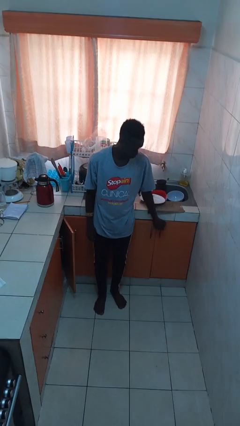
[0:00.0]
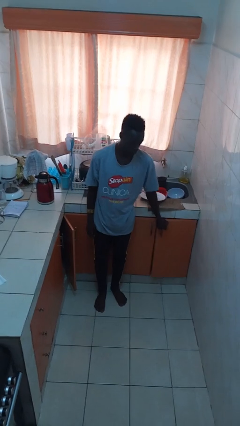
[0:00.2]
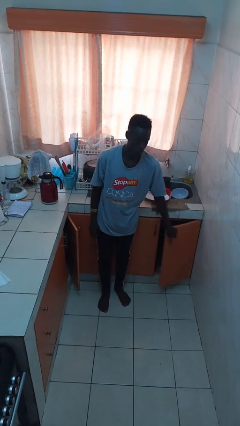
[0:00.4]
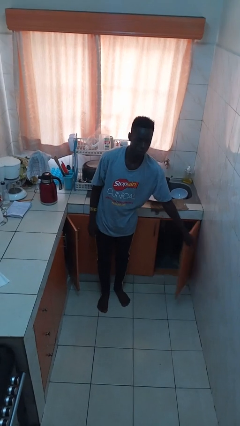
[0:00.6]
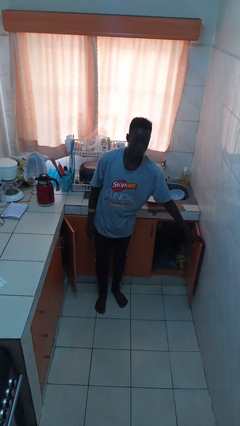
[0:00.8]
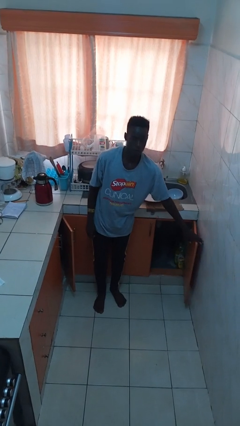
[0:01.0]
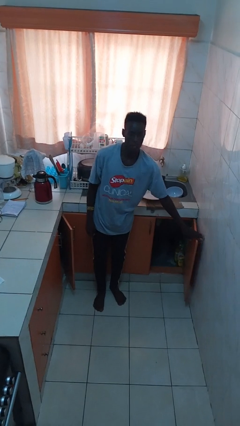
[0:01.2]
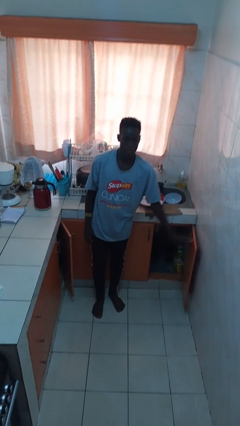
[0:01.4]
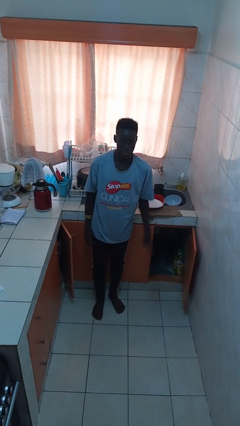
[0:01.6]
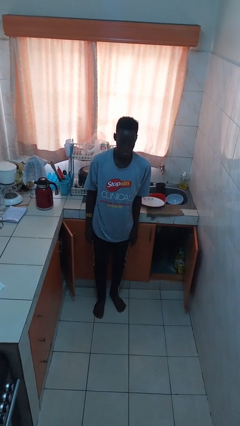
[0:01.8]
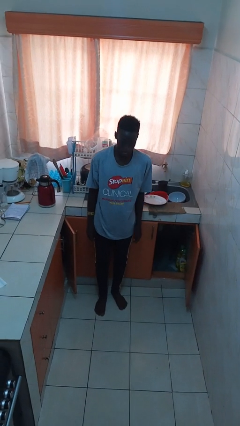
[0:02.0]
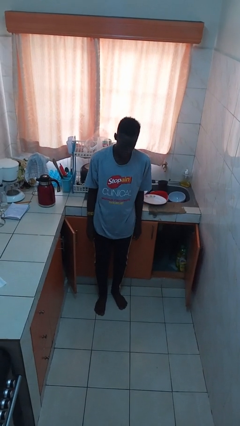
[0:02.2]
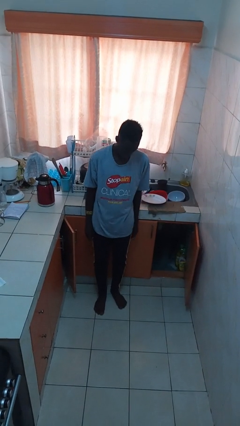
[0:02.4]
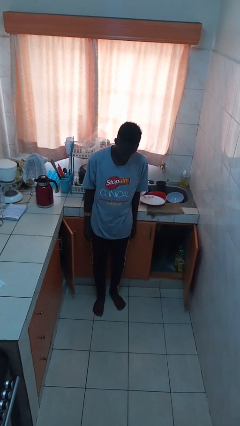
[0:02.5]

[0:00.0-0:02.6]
person opens cabinet

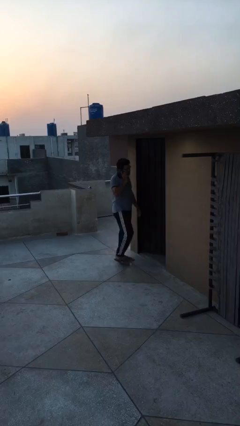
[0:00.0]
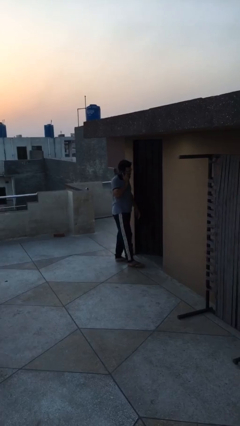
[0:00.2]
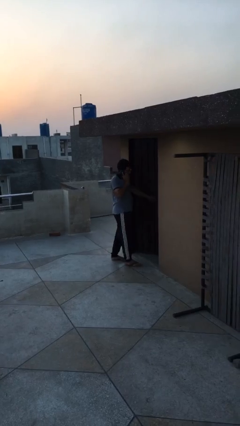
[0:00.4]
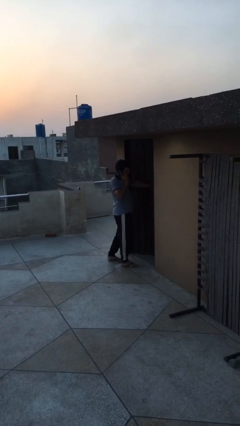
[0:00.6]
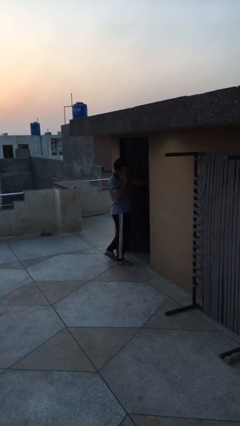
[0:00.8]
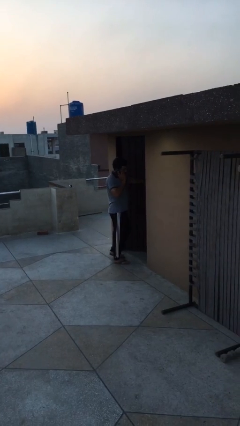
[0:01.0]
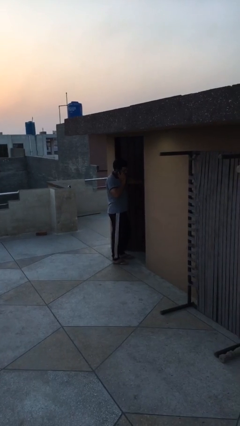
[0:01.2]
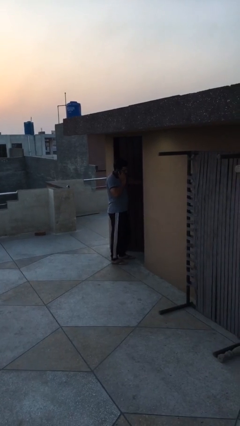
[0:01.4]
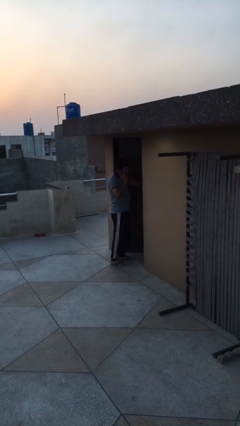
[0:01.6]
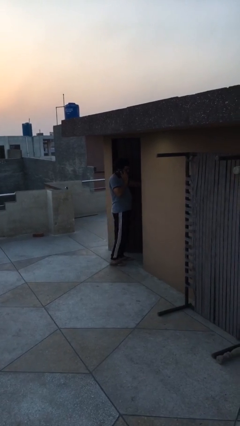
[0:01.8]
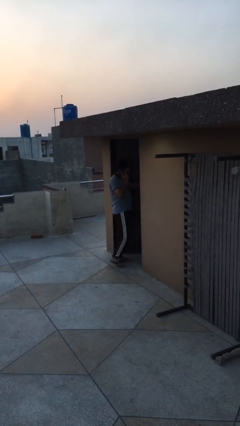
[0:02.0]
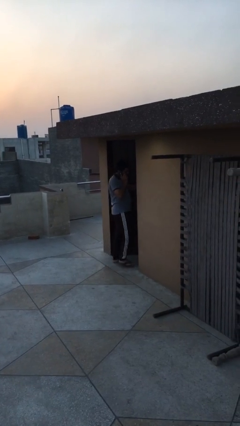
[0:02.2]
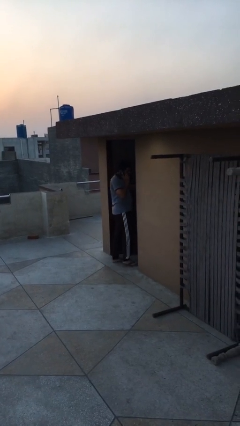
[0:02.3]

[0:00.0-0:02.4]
person opens facility door

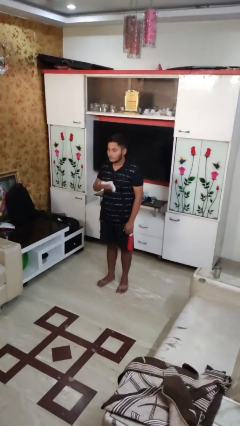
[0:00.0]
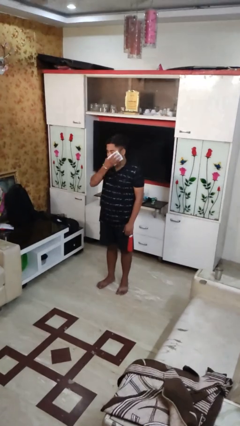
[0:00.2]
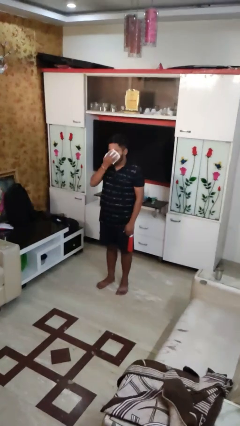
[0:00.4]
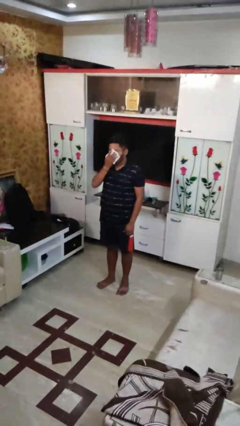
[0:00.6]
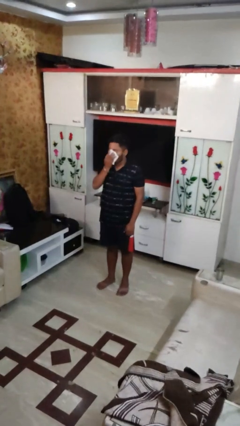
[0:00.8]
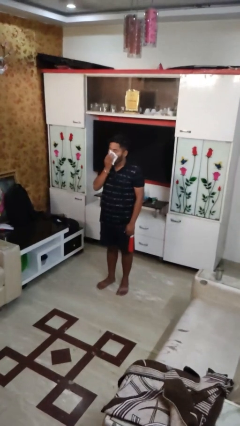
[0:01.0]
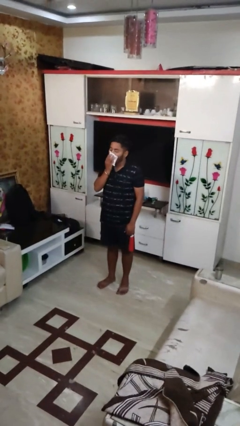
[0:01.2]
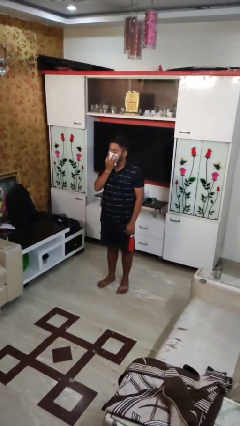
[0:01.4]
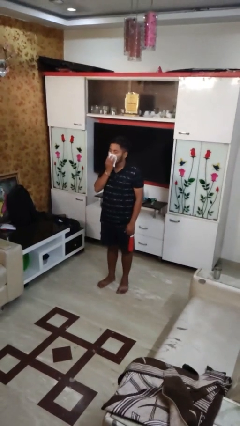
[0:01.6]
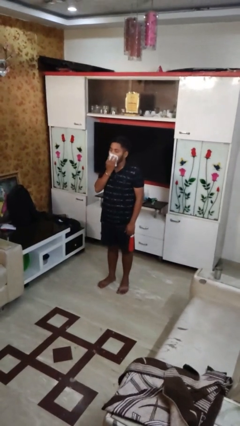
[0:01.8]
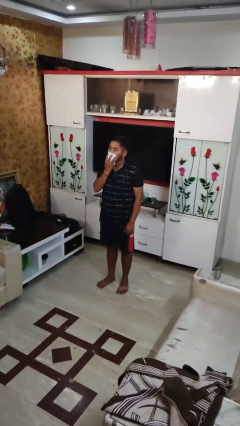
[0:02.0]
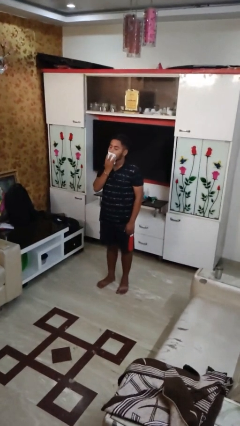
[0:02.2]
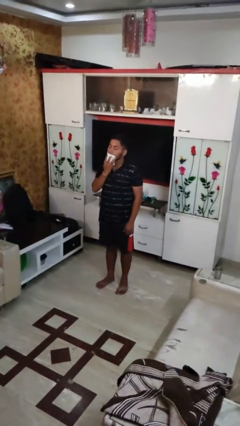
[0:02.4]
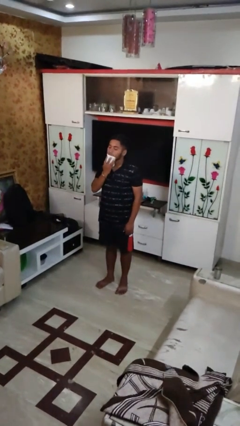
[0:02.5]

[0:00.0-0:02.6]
person wipes mouth with napkin

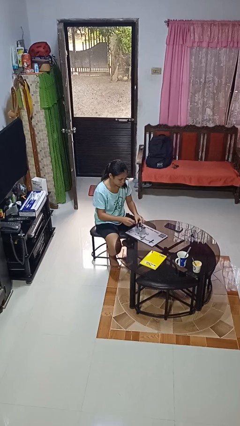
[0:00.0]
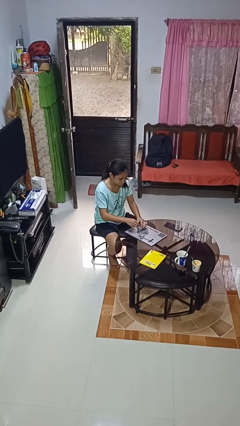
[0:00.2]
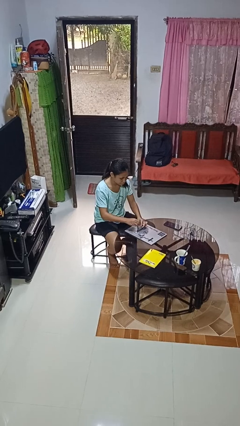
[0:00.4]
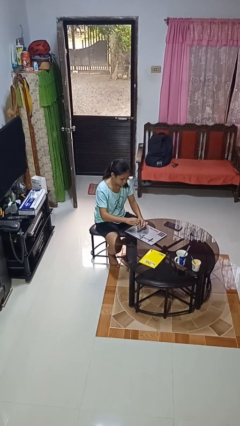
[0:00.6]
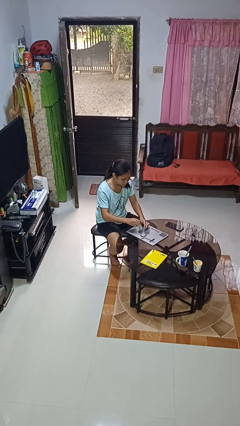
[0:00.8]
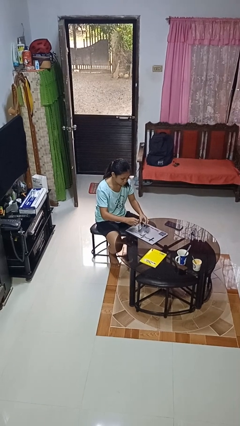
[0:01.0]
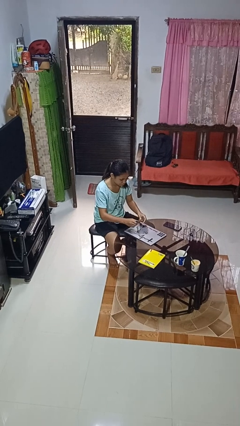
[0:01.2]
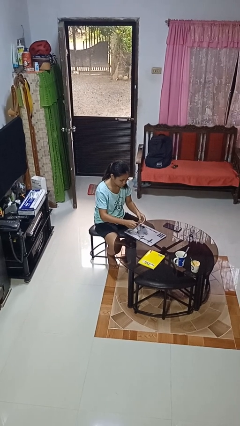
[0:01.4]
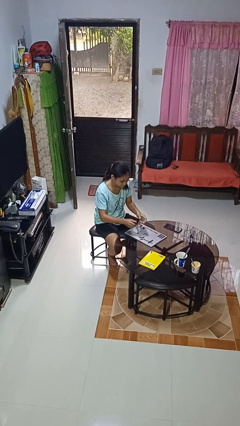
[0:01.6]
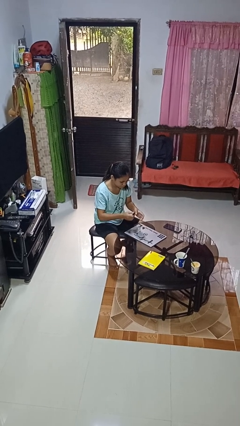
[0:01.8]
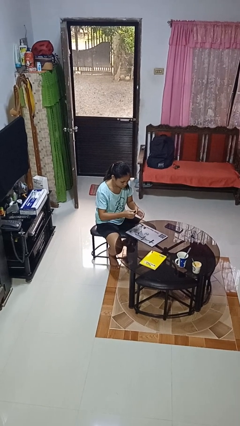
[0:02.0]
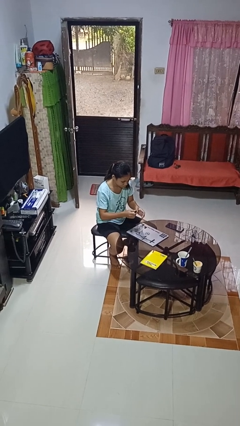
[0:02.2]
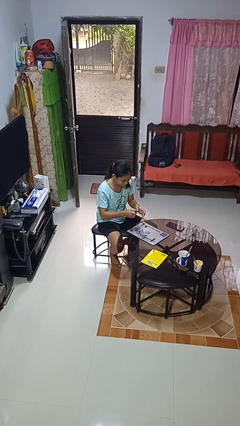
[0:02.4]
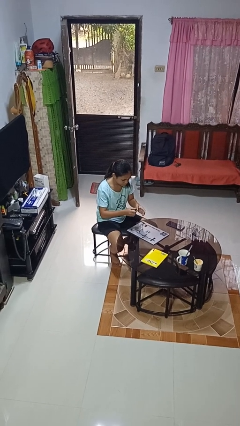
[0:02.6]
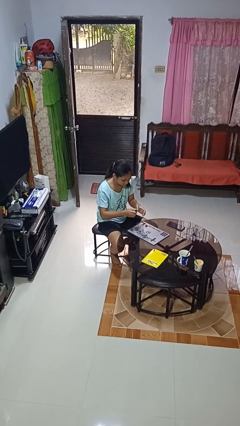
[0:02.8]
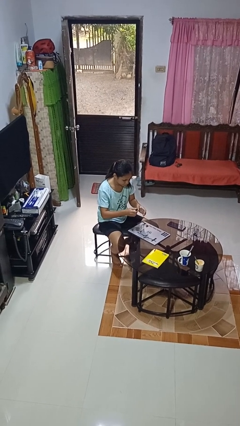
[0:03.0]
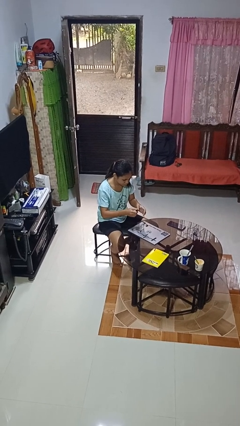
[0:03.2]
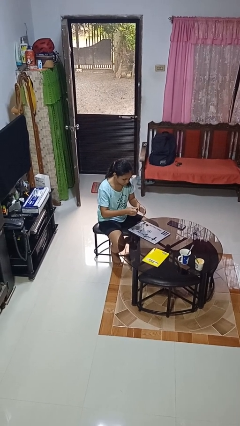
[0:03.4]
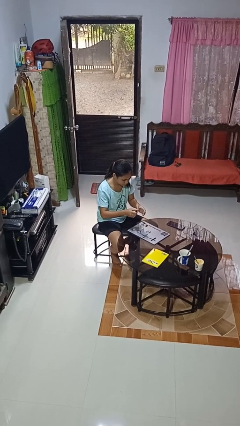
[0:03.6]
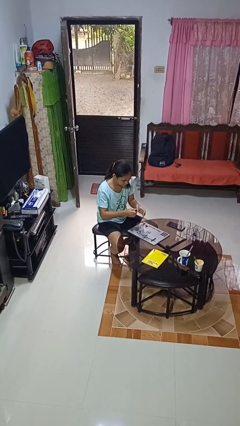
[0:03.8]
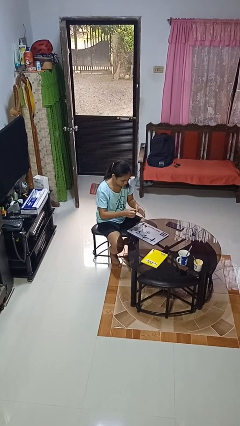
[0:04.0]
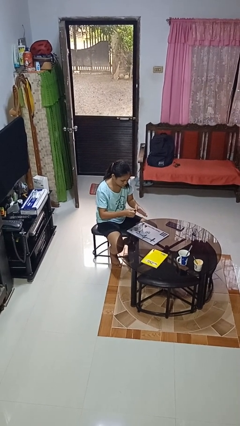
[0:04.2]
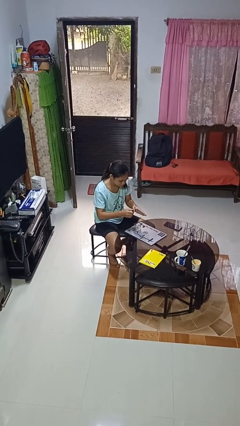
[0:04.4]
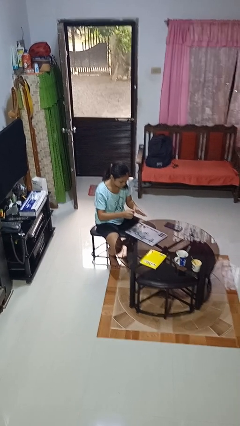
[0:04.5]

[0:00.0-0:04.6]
person paints fingernails

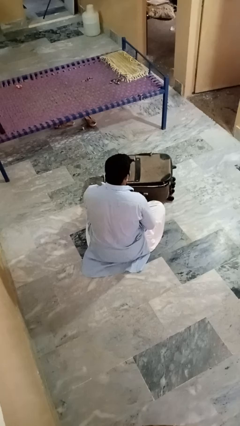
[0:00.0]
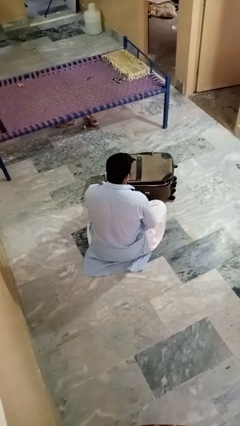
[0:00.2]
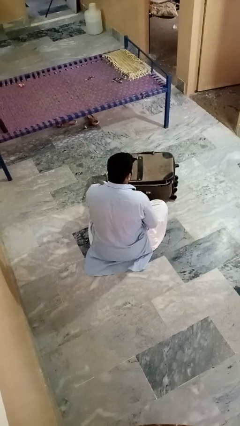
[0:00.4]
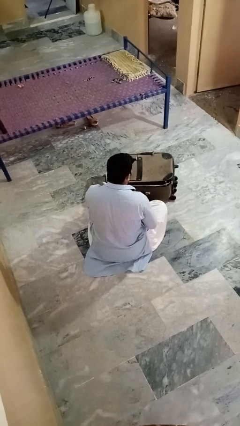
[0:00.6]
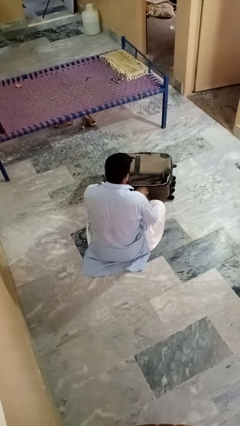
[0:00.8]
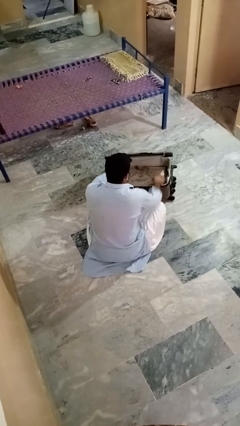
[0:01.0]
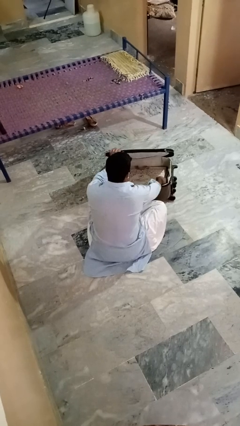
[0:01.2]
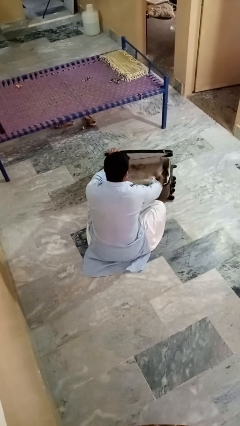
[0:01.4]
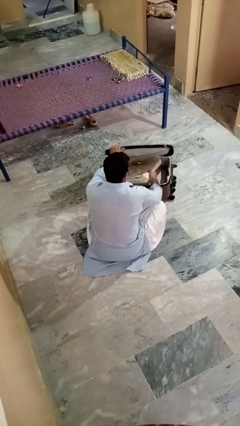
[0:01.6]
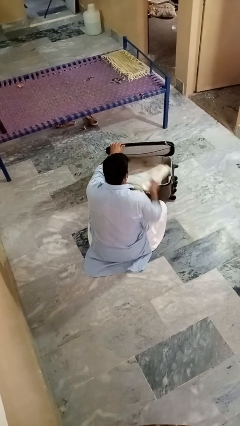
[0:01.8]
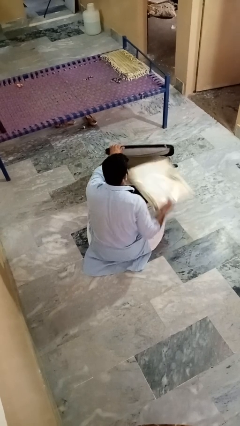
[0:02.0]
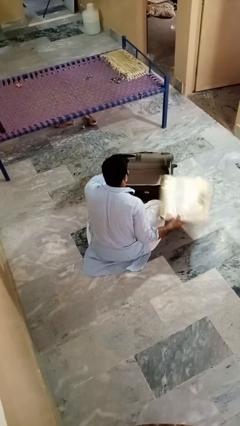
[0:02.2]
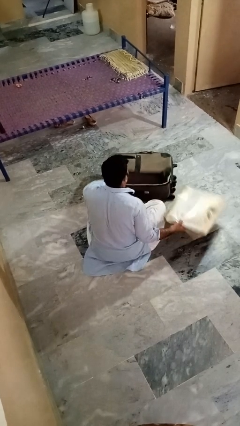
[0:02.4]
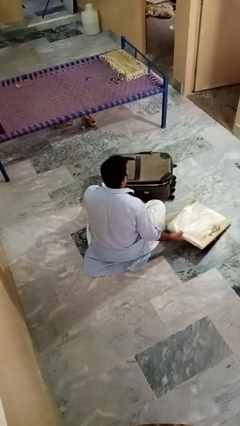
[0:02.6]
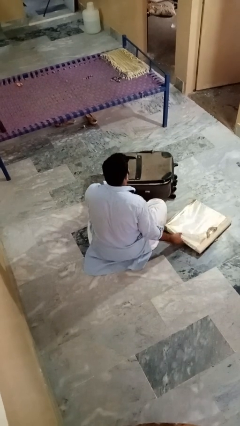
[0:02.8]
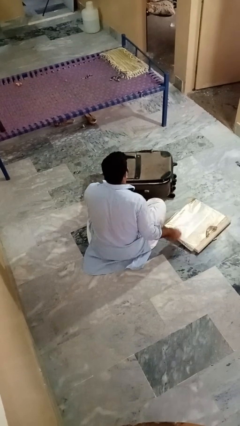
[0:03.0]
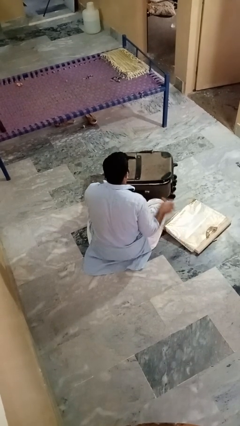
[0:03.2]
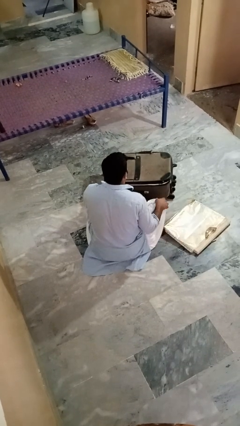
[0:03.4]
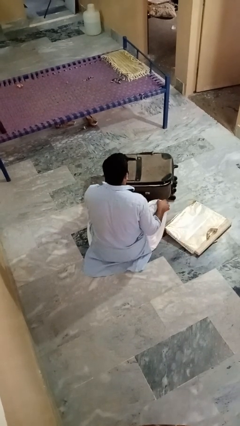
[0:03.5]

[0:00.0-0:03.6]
person takes object from bag

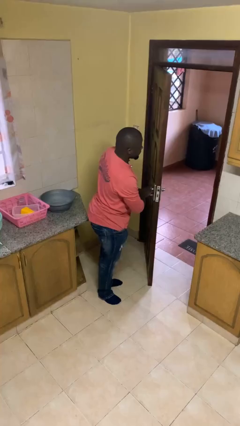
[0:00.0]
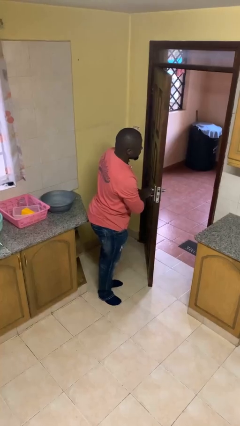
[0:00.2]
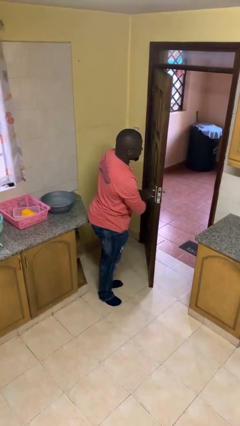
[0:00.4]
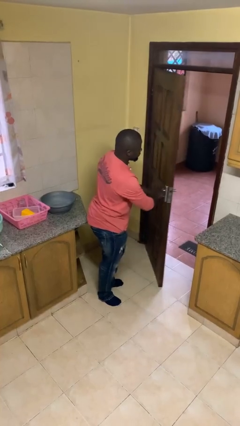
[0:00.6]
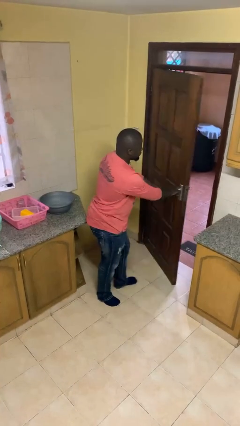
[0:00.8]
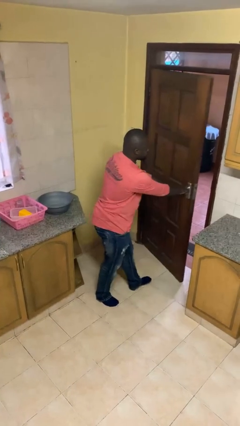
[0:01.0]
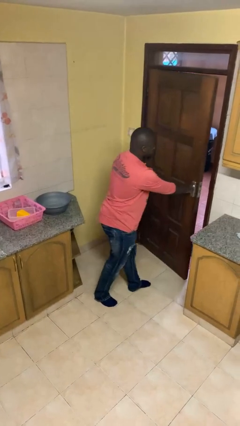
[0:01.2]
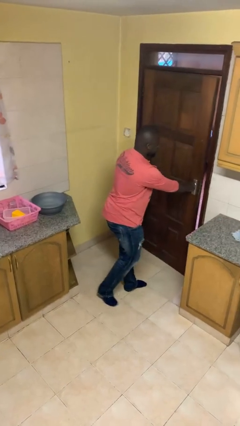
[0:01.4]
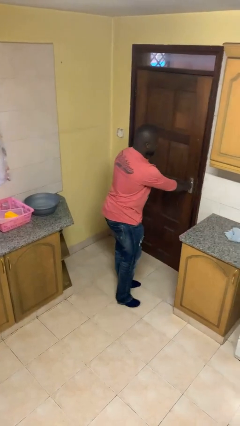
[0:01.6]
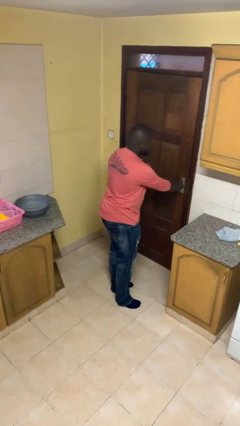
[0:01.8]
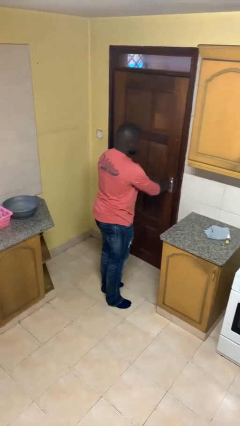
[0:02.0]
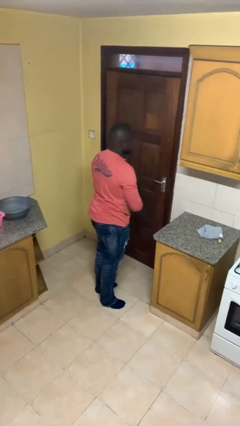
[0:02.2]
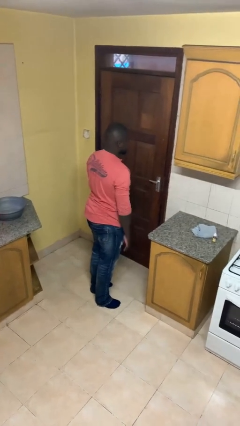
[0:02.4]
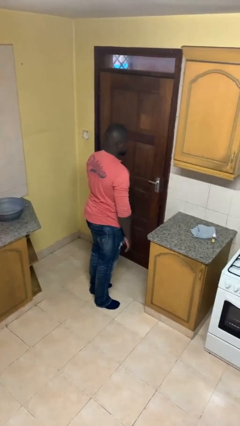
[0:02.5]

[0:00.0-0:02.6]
person closes facility door
